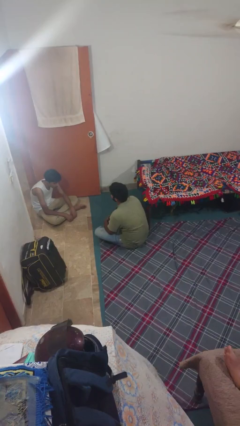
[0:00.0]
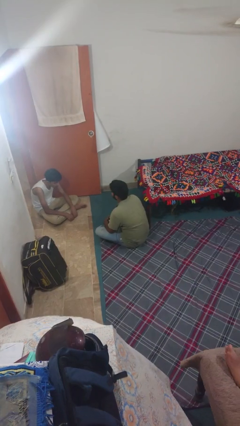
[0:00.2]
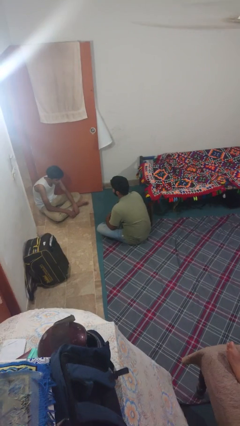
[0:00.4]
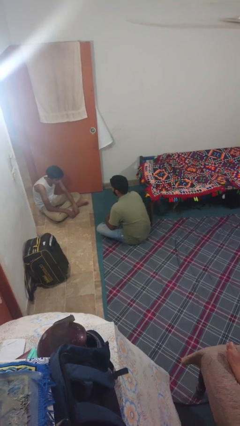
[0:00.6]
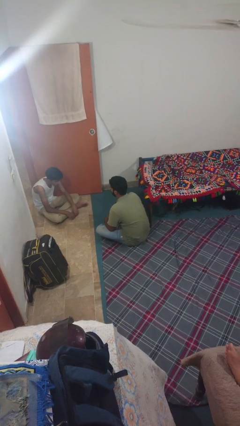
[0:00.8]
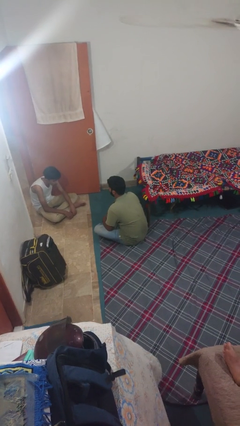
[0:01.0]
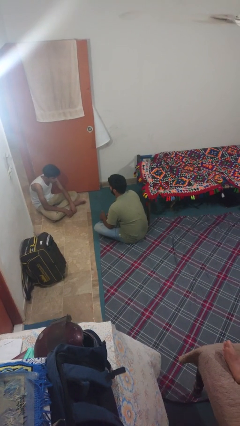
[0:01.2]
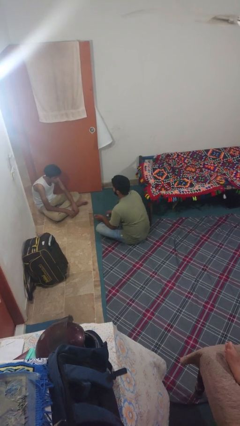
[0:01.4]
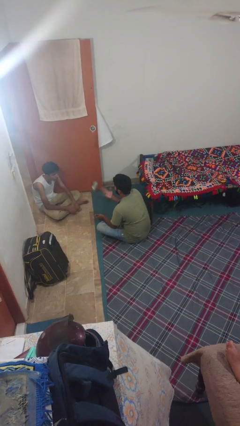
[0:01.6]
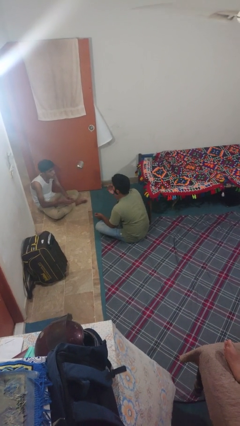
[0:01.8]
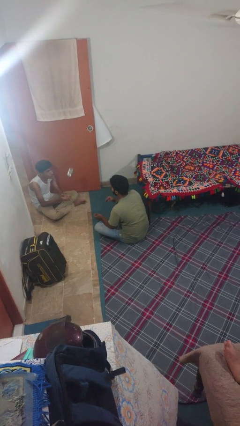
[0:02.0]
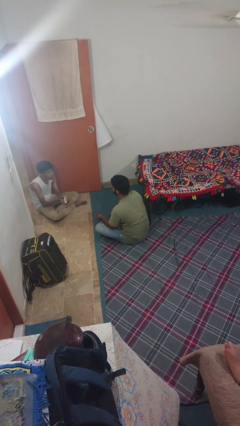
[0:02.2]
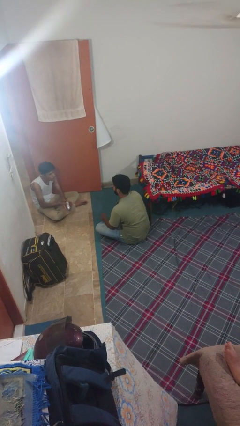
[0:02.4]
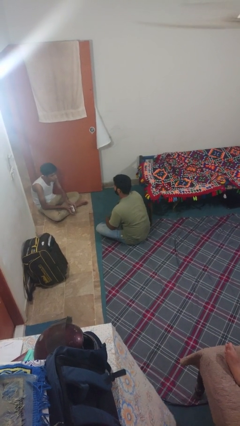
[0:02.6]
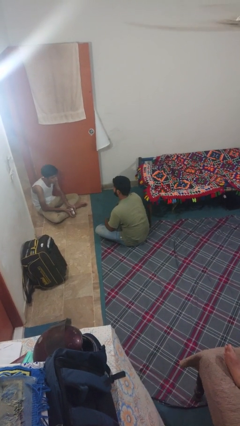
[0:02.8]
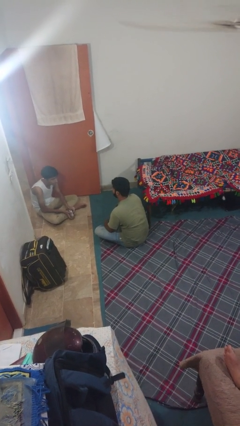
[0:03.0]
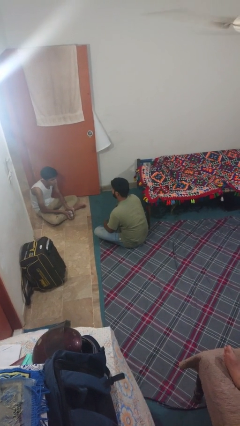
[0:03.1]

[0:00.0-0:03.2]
person throws object to person

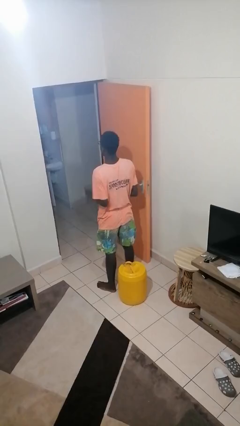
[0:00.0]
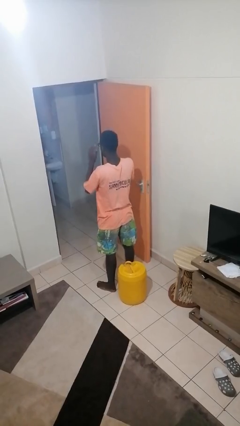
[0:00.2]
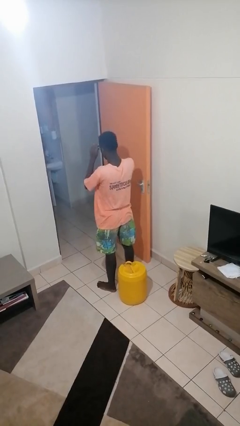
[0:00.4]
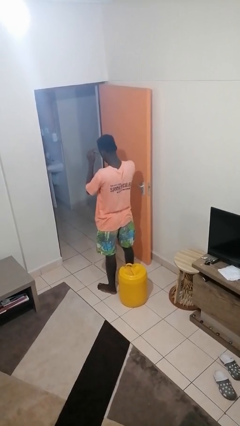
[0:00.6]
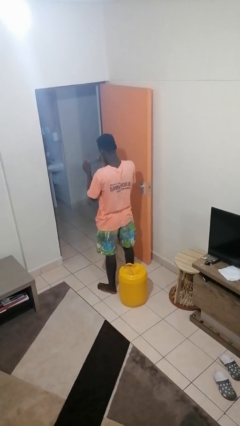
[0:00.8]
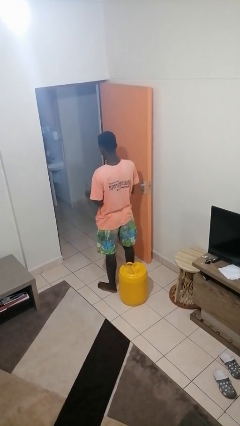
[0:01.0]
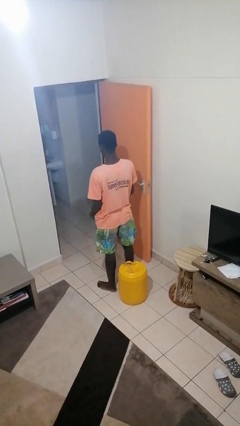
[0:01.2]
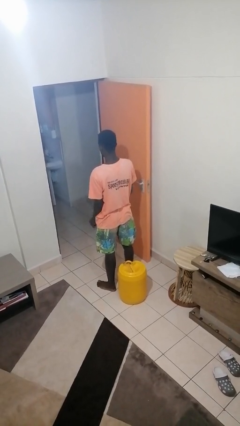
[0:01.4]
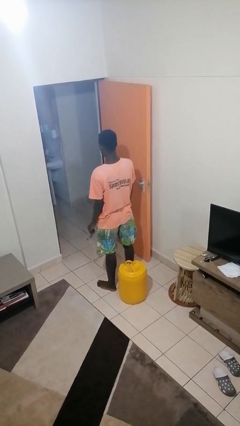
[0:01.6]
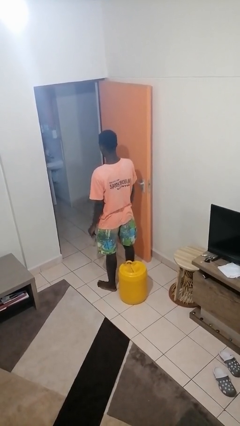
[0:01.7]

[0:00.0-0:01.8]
person takes off glasses

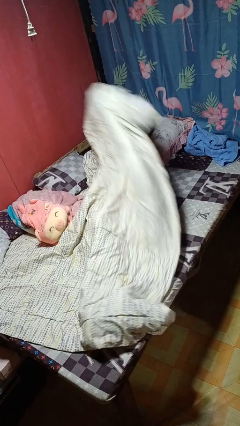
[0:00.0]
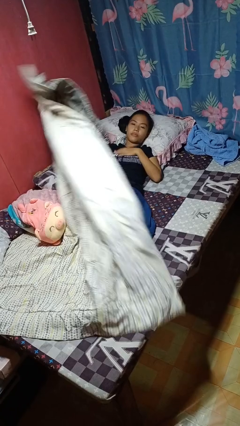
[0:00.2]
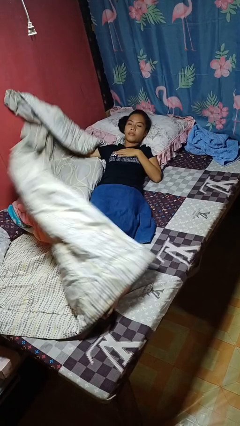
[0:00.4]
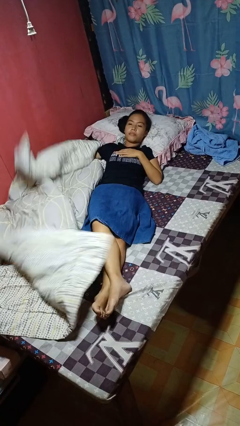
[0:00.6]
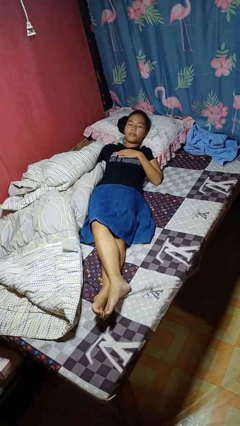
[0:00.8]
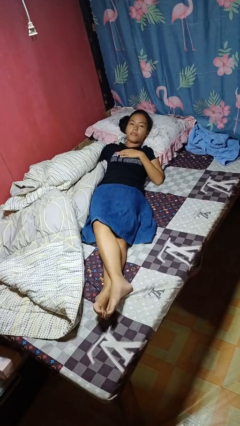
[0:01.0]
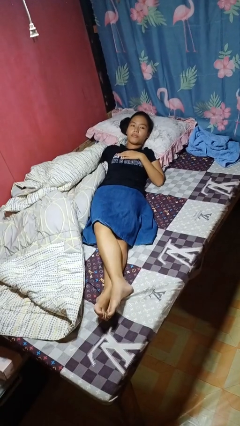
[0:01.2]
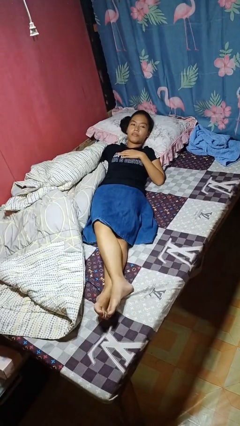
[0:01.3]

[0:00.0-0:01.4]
person uncovers with bedsheets

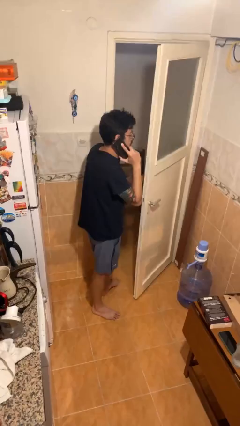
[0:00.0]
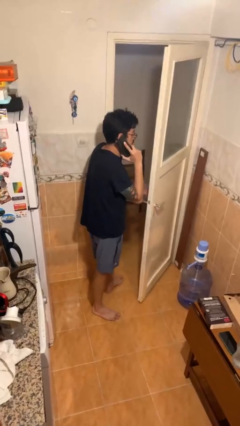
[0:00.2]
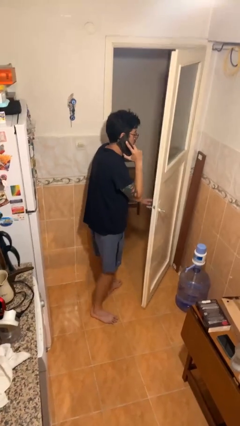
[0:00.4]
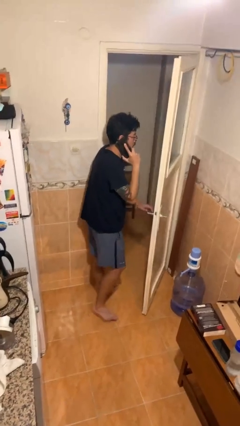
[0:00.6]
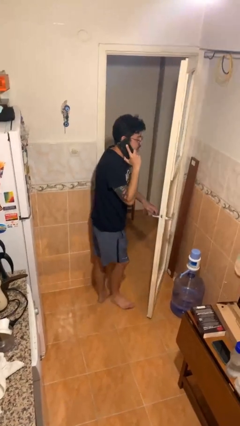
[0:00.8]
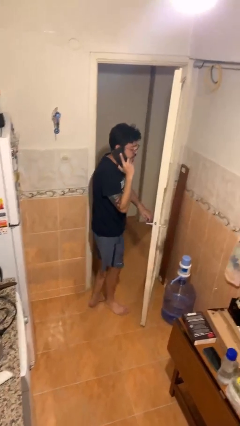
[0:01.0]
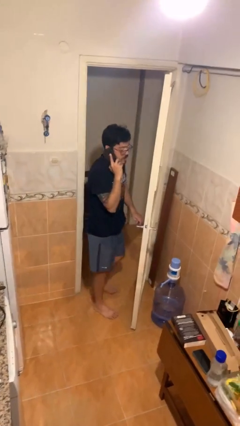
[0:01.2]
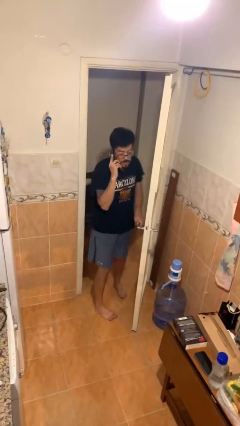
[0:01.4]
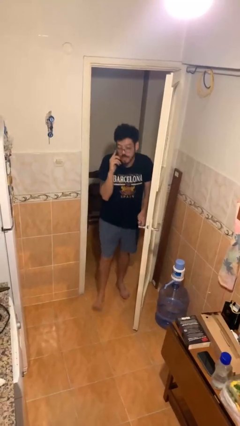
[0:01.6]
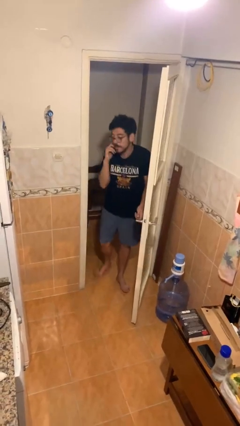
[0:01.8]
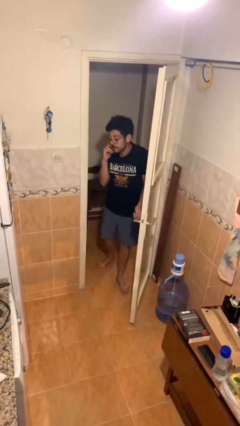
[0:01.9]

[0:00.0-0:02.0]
person exits scene through structure

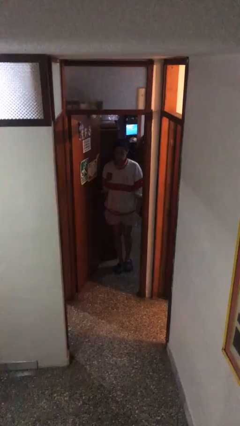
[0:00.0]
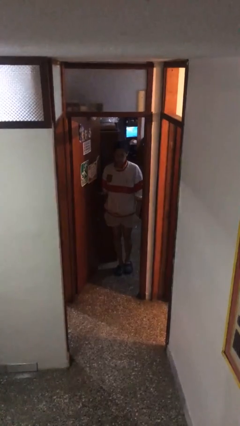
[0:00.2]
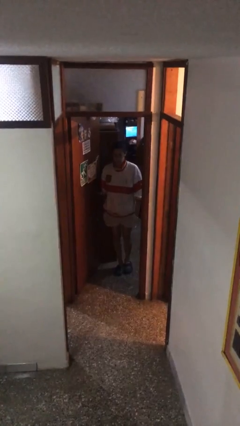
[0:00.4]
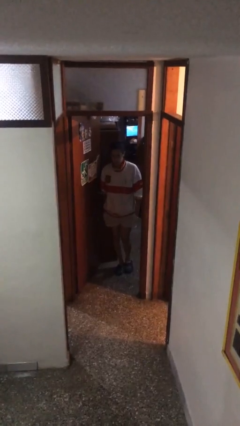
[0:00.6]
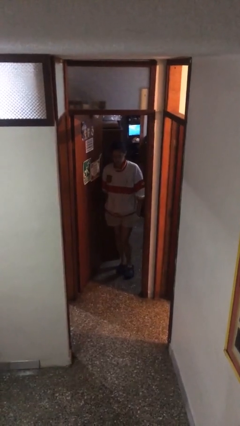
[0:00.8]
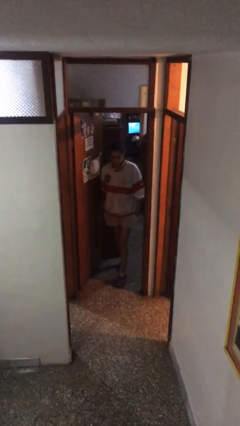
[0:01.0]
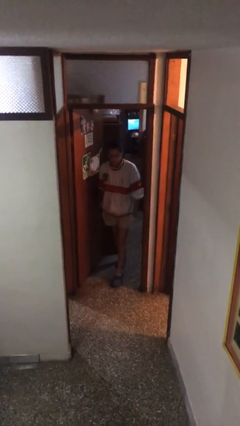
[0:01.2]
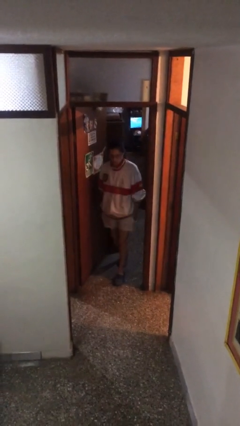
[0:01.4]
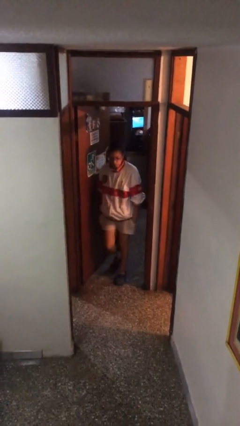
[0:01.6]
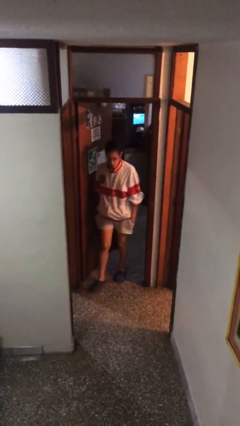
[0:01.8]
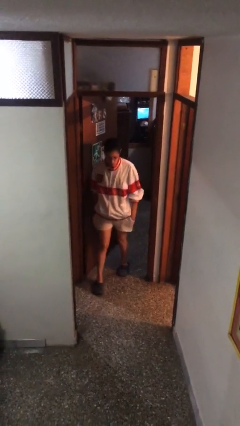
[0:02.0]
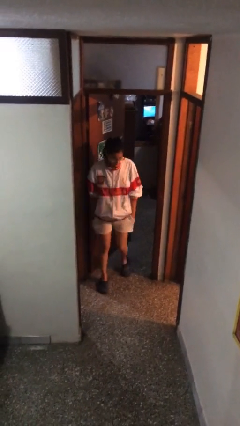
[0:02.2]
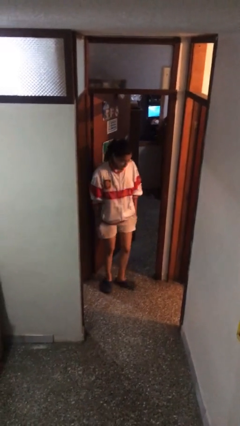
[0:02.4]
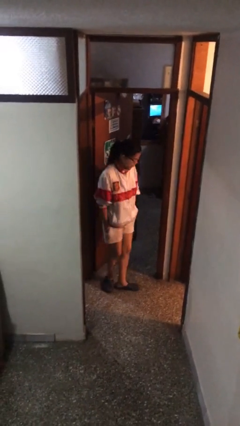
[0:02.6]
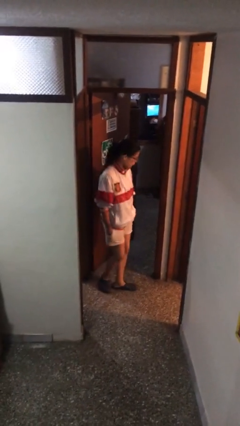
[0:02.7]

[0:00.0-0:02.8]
person enters scene through structure

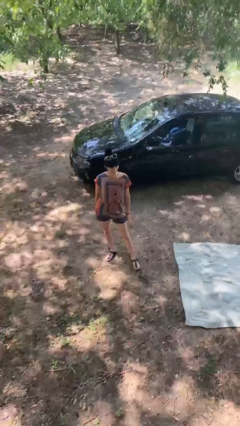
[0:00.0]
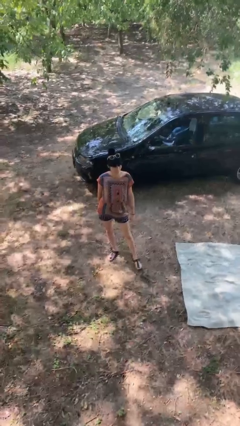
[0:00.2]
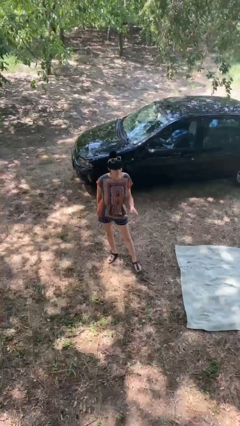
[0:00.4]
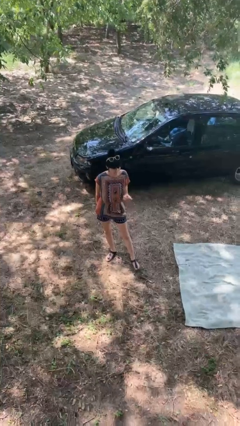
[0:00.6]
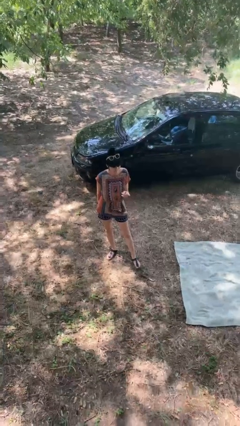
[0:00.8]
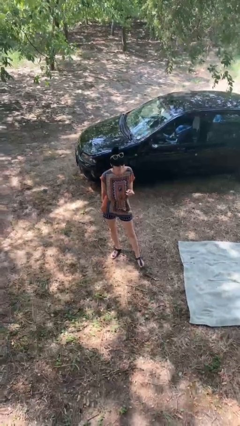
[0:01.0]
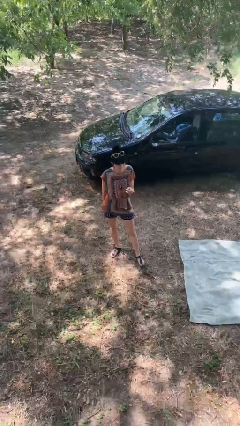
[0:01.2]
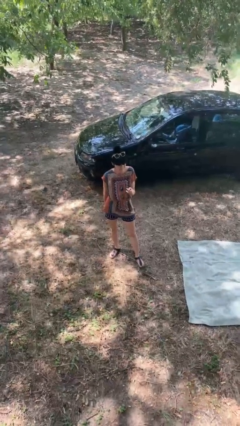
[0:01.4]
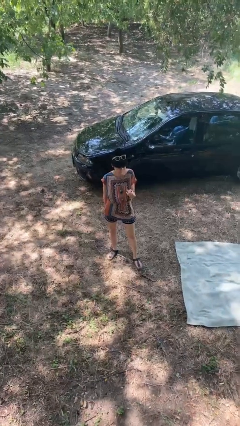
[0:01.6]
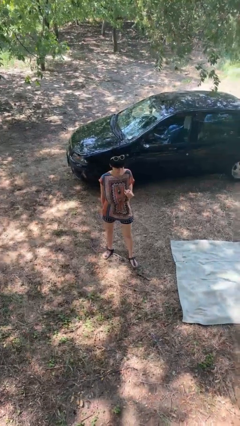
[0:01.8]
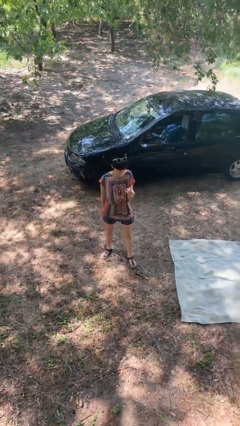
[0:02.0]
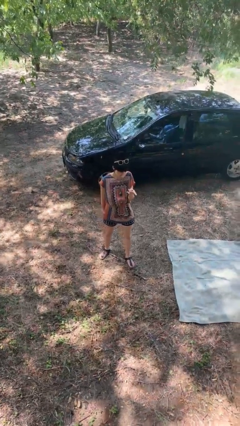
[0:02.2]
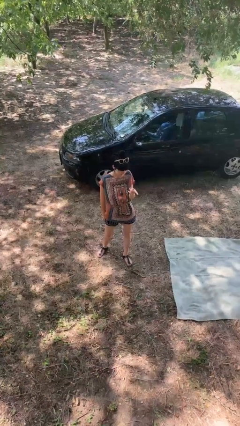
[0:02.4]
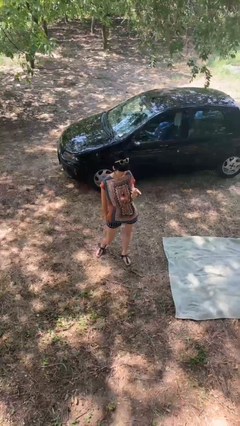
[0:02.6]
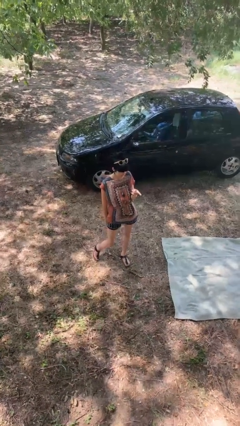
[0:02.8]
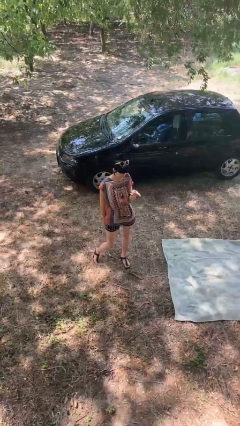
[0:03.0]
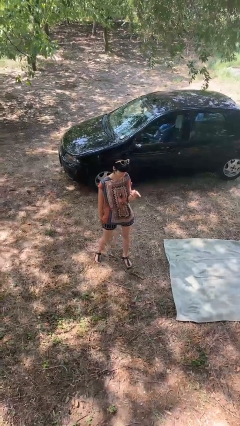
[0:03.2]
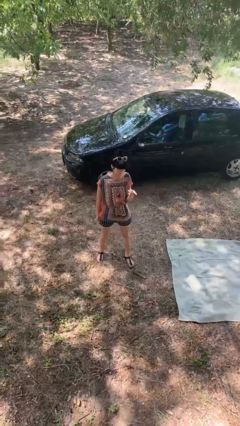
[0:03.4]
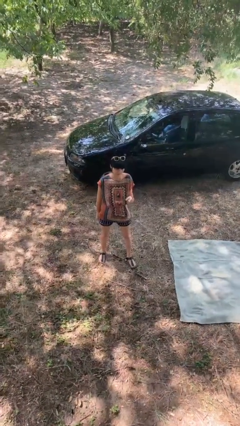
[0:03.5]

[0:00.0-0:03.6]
person points at person

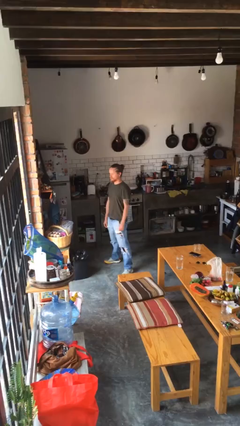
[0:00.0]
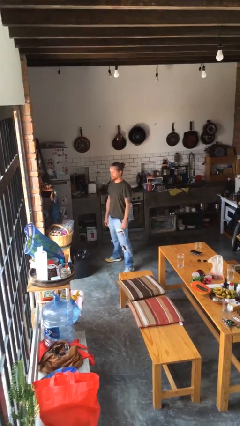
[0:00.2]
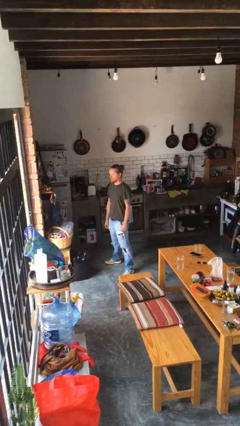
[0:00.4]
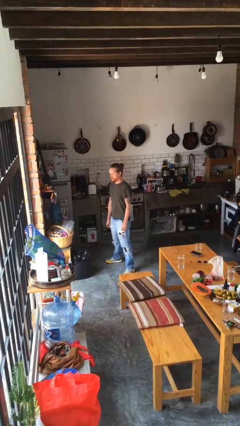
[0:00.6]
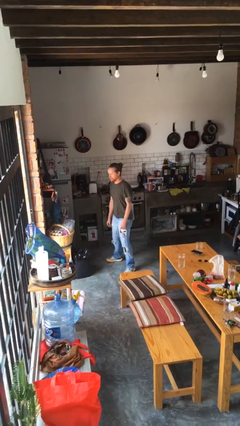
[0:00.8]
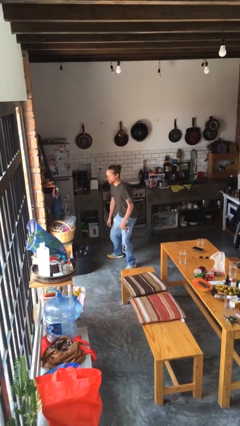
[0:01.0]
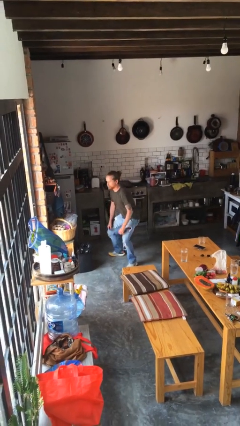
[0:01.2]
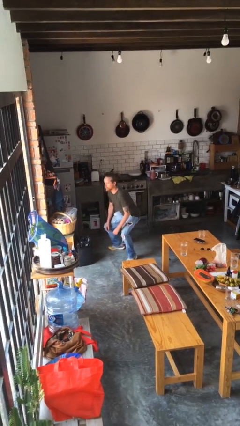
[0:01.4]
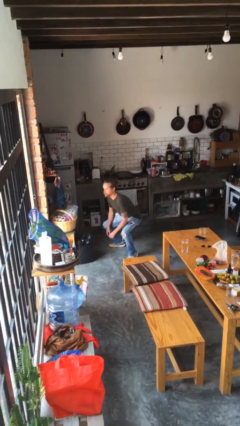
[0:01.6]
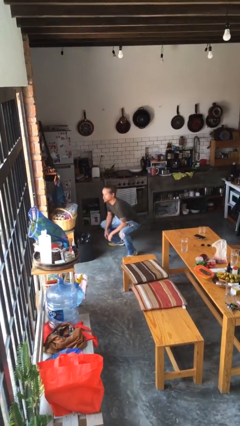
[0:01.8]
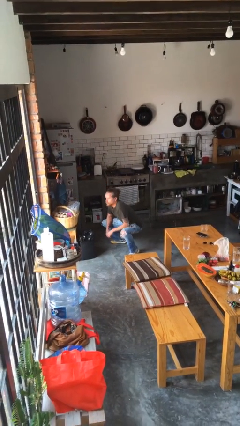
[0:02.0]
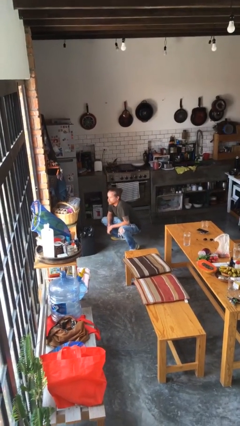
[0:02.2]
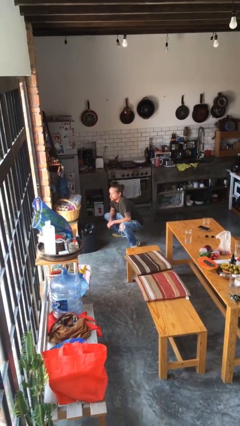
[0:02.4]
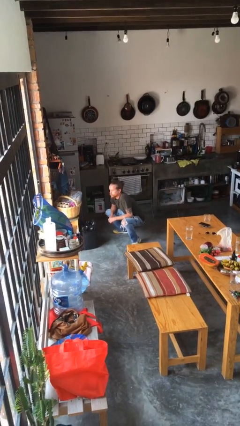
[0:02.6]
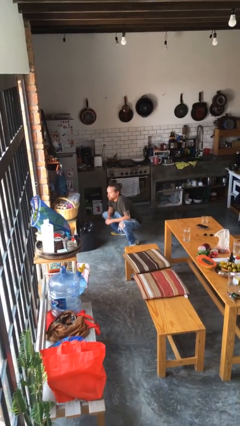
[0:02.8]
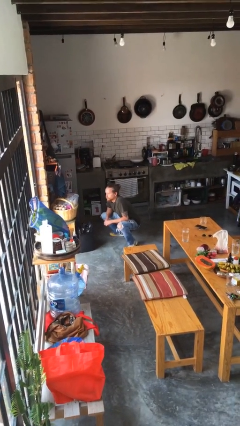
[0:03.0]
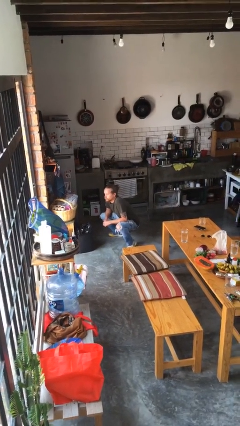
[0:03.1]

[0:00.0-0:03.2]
person squats
